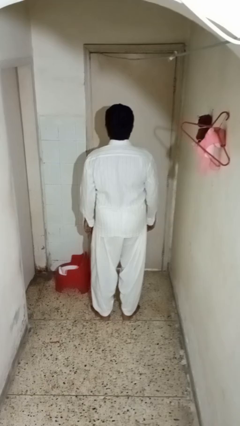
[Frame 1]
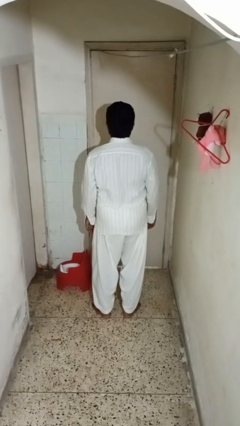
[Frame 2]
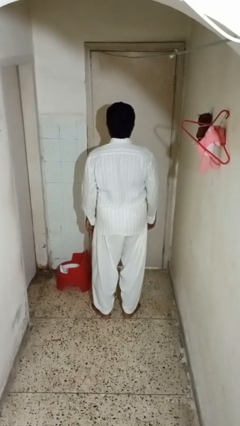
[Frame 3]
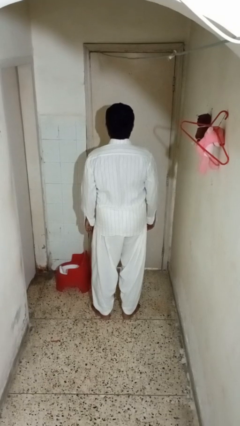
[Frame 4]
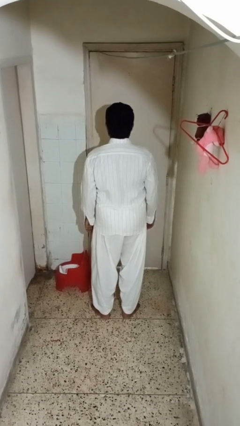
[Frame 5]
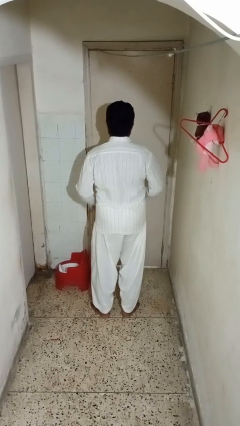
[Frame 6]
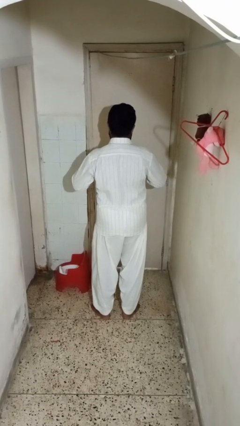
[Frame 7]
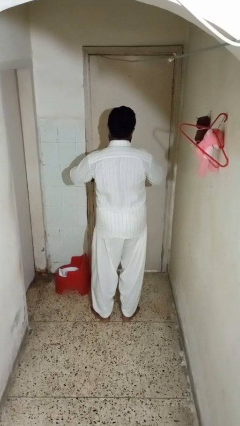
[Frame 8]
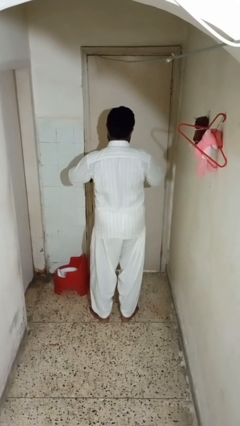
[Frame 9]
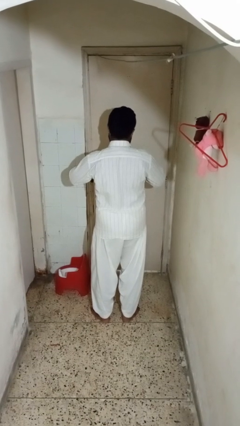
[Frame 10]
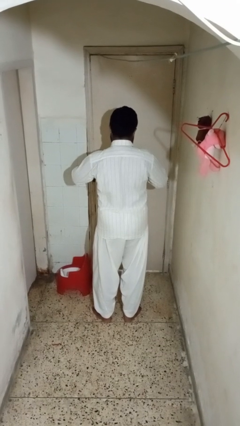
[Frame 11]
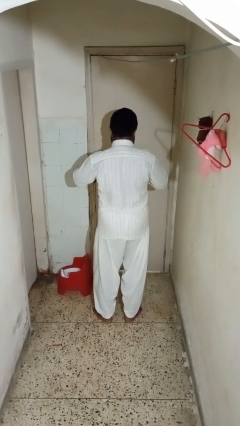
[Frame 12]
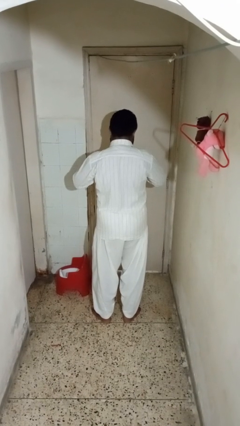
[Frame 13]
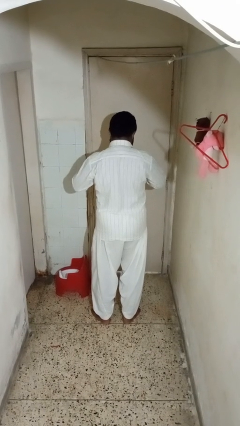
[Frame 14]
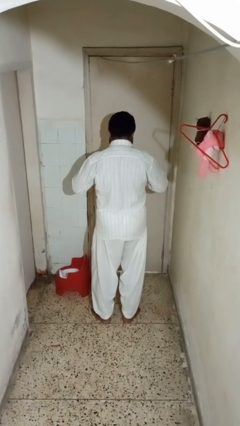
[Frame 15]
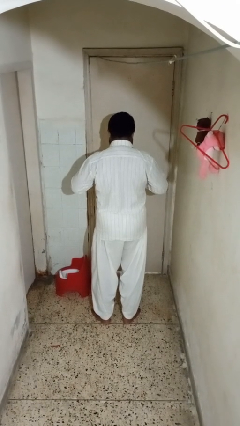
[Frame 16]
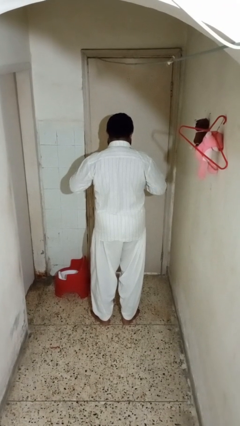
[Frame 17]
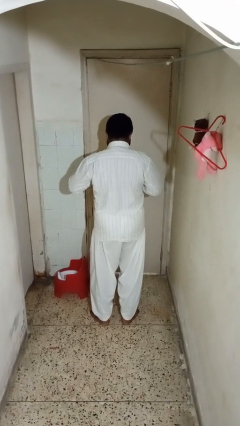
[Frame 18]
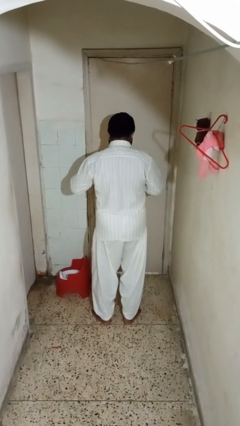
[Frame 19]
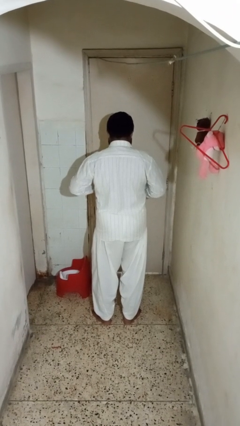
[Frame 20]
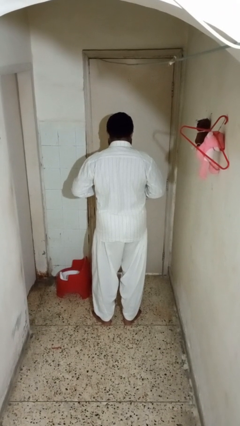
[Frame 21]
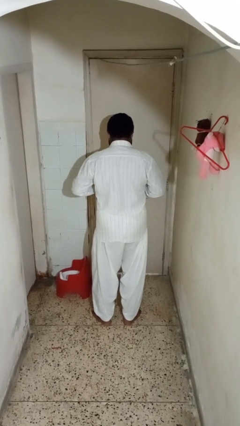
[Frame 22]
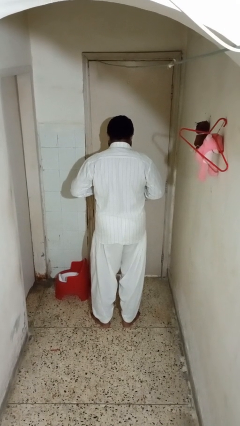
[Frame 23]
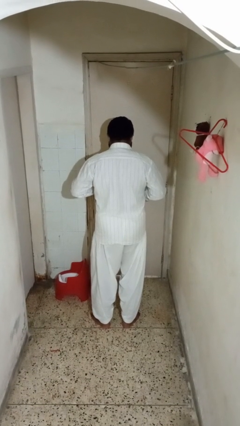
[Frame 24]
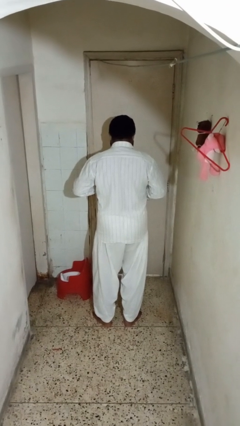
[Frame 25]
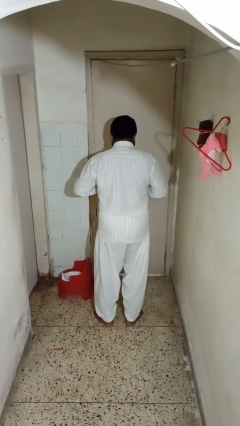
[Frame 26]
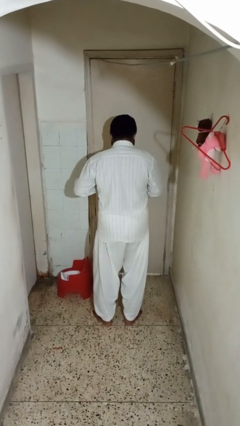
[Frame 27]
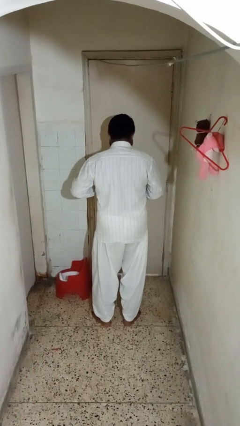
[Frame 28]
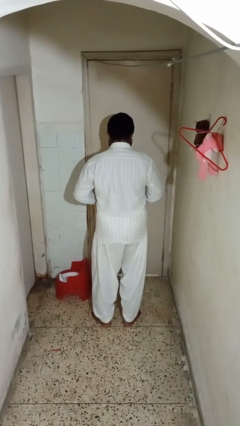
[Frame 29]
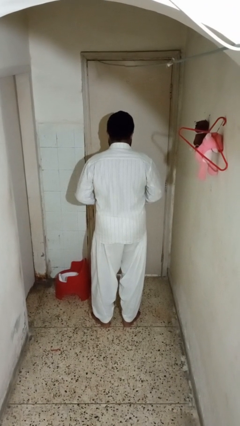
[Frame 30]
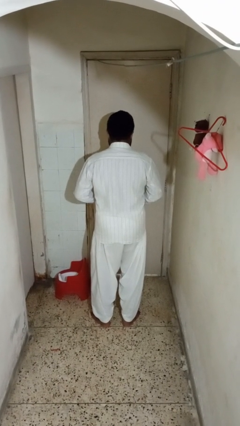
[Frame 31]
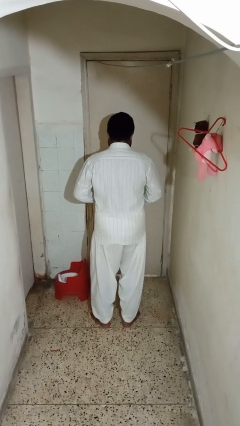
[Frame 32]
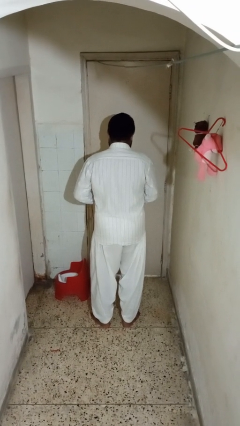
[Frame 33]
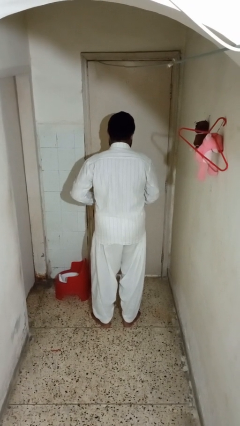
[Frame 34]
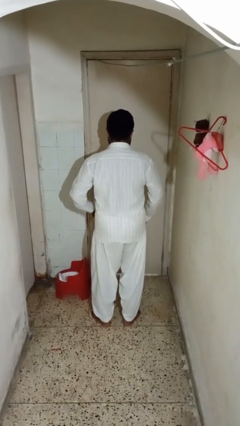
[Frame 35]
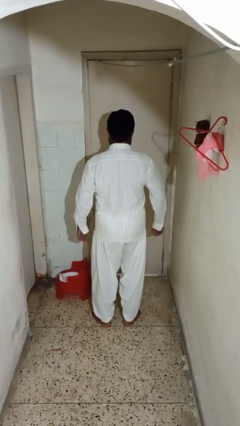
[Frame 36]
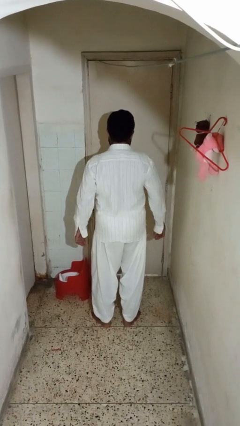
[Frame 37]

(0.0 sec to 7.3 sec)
person unbuttons shirt

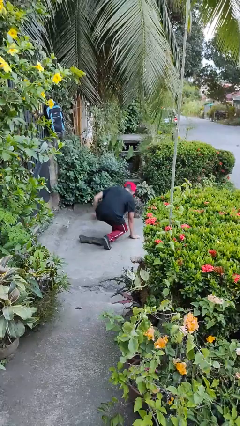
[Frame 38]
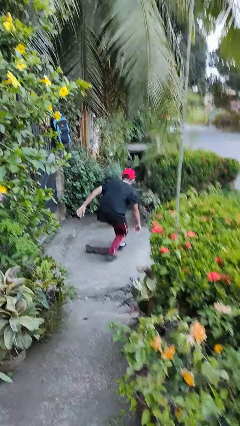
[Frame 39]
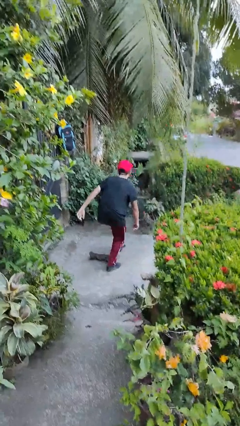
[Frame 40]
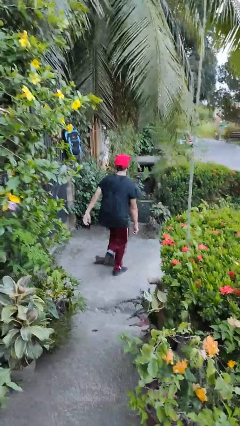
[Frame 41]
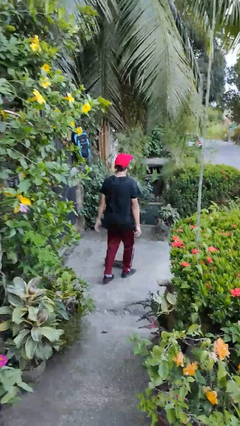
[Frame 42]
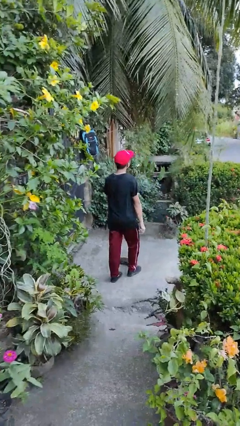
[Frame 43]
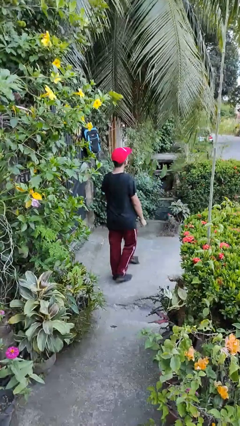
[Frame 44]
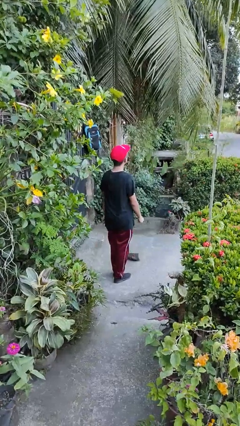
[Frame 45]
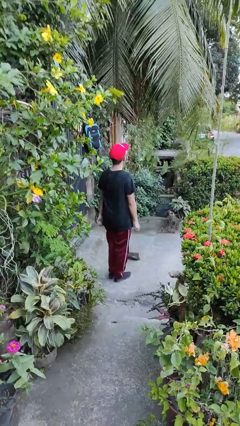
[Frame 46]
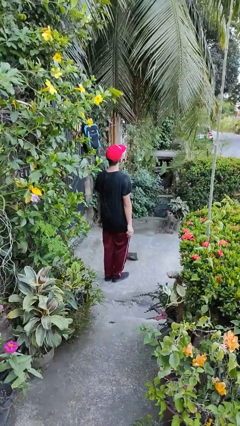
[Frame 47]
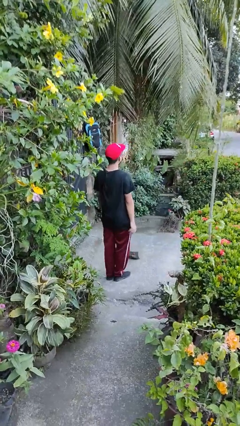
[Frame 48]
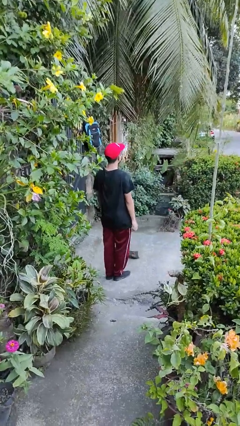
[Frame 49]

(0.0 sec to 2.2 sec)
person stands up from floor

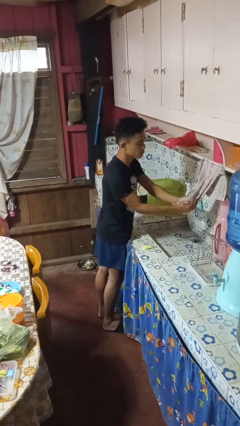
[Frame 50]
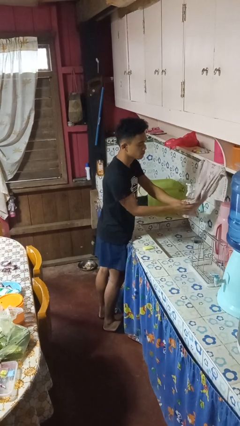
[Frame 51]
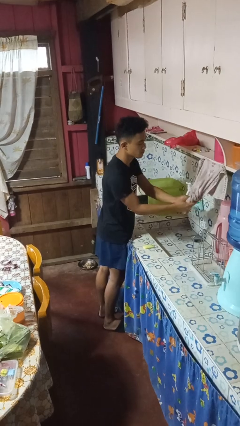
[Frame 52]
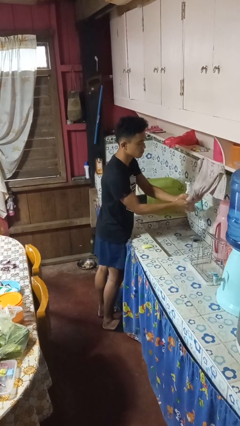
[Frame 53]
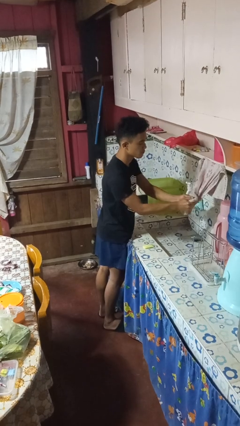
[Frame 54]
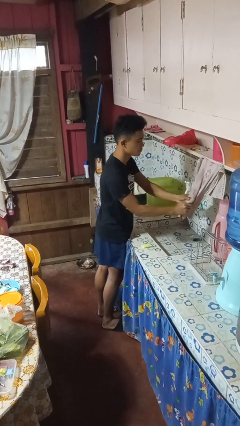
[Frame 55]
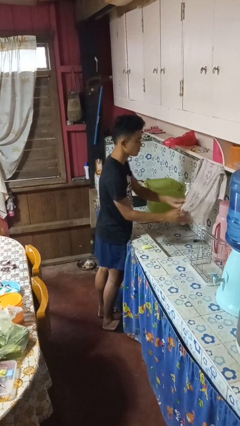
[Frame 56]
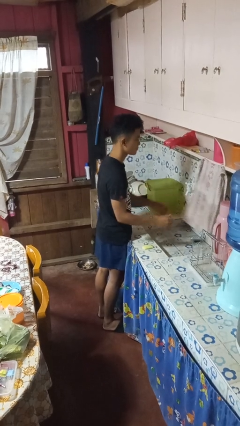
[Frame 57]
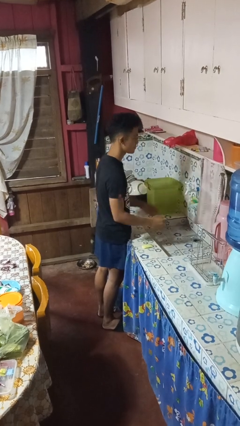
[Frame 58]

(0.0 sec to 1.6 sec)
person dries hands with towel

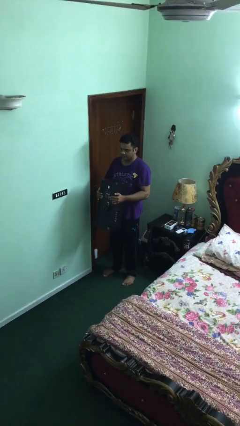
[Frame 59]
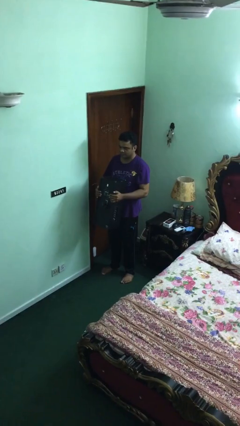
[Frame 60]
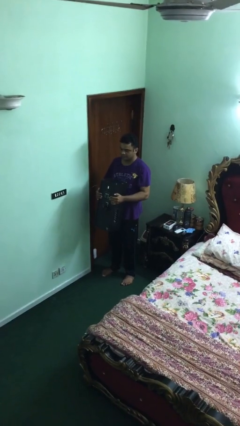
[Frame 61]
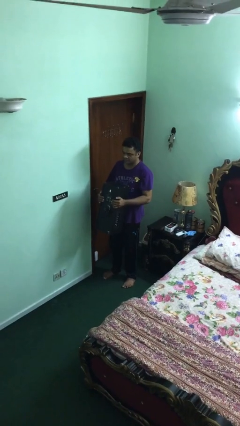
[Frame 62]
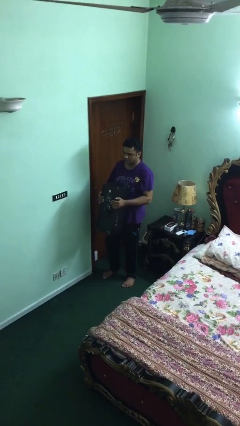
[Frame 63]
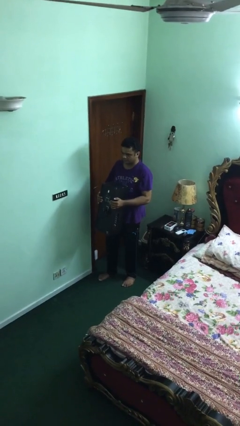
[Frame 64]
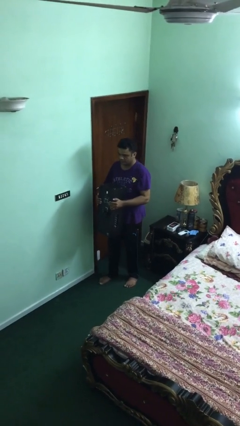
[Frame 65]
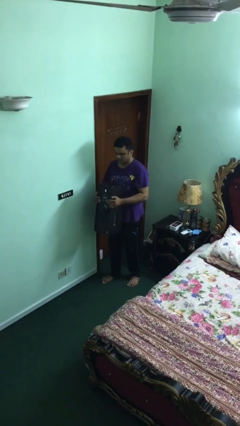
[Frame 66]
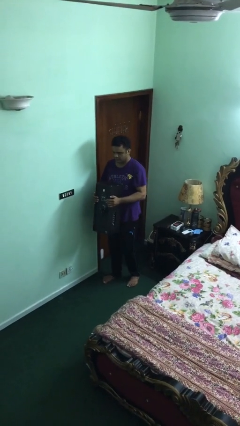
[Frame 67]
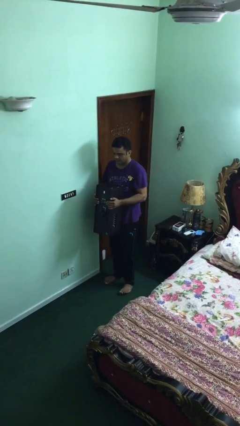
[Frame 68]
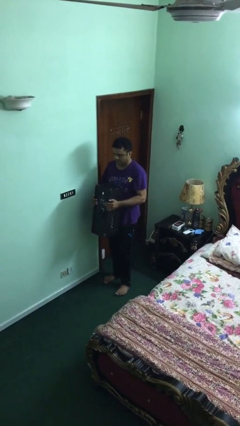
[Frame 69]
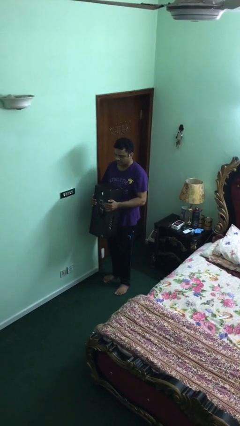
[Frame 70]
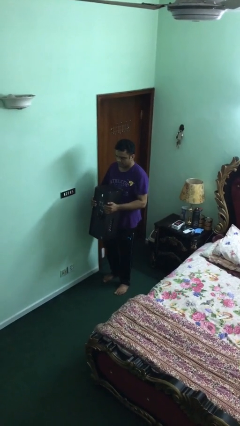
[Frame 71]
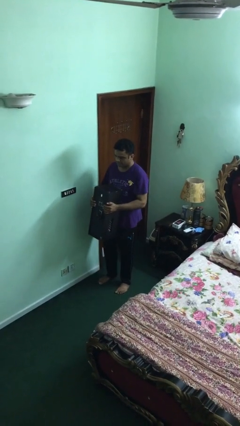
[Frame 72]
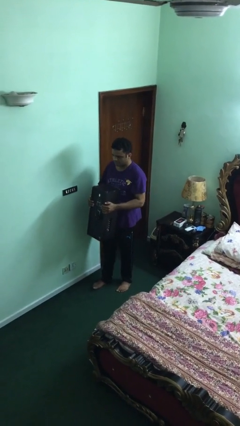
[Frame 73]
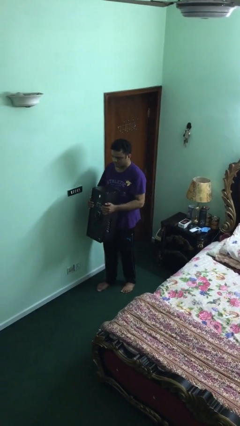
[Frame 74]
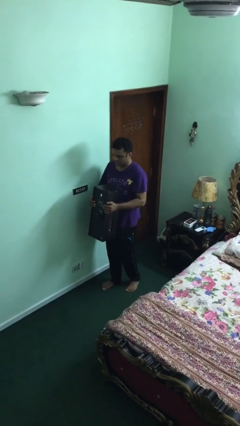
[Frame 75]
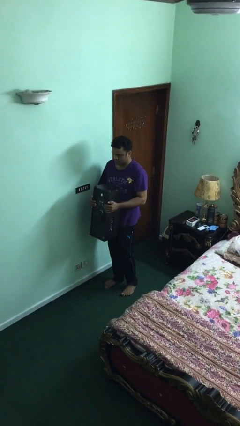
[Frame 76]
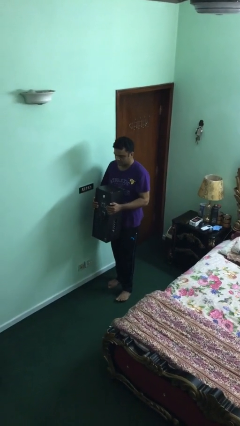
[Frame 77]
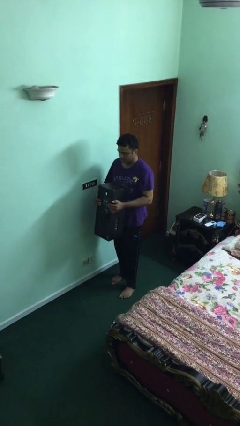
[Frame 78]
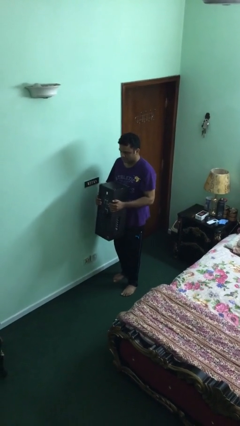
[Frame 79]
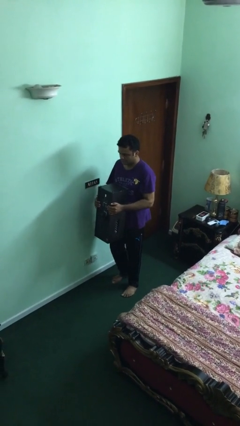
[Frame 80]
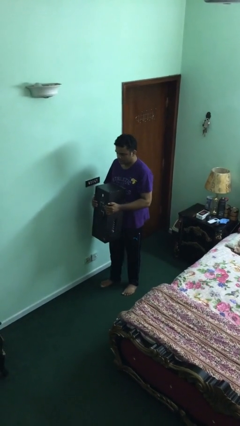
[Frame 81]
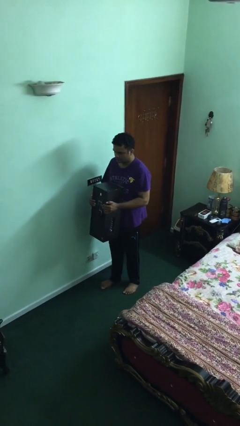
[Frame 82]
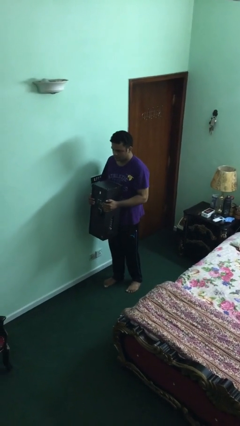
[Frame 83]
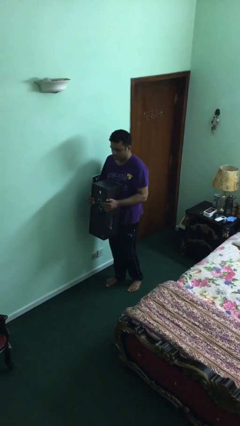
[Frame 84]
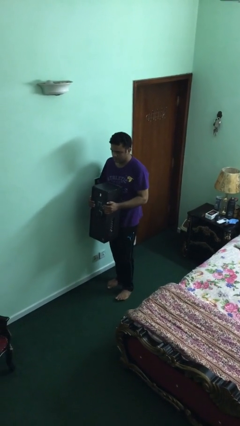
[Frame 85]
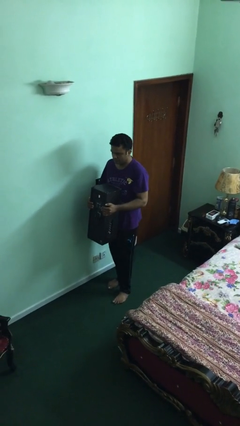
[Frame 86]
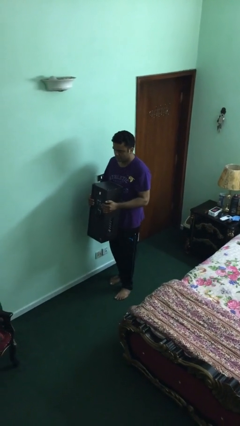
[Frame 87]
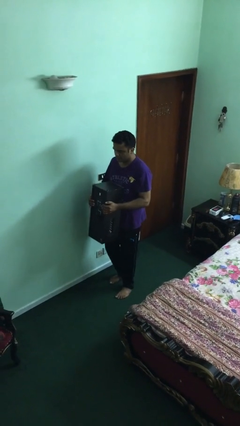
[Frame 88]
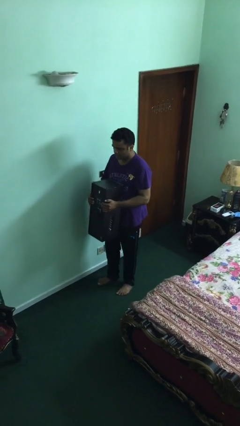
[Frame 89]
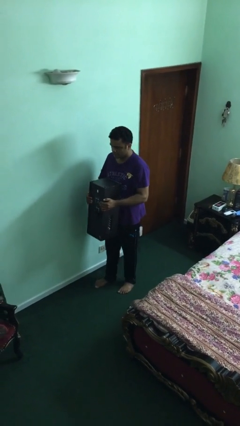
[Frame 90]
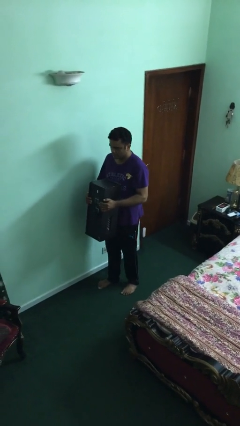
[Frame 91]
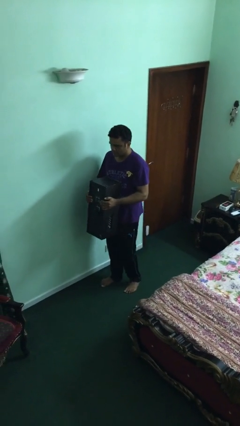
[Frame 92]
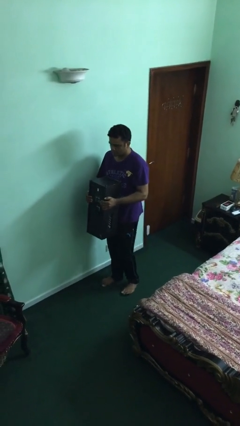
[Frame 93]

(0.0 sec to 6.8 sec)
person carries heavy object
